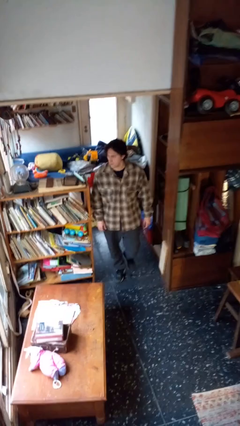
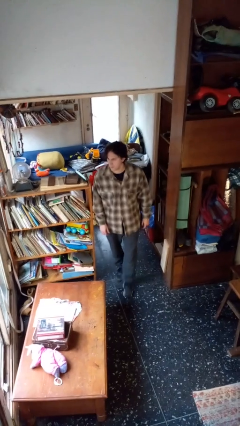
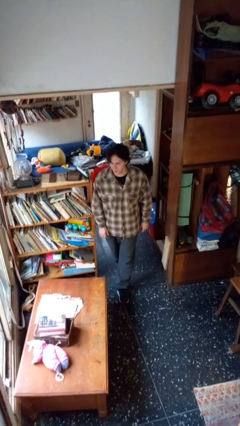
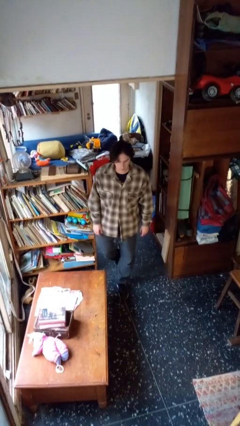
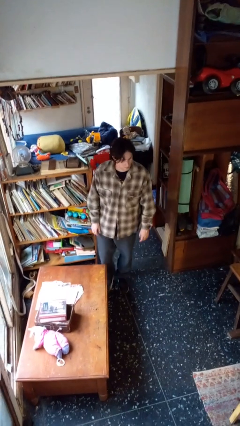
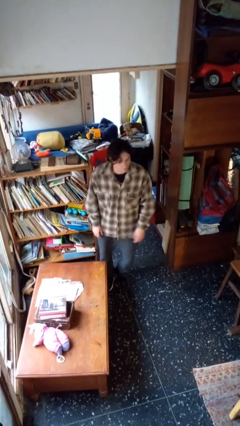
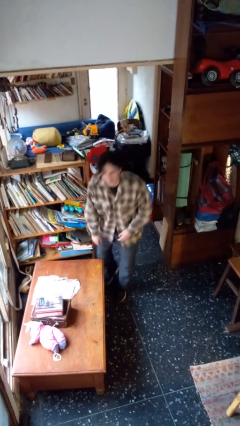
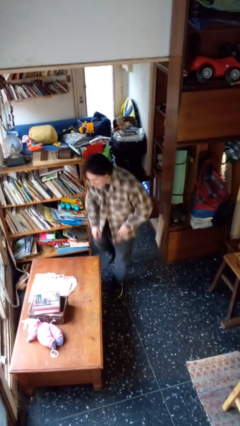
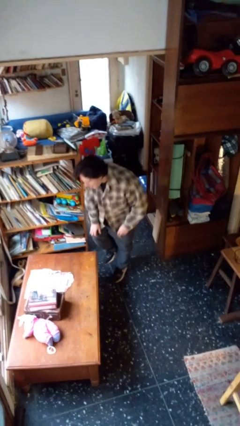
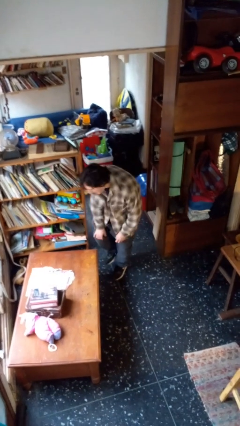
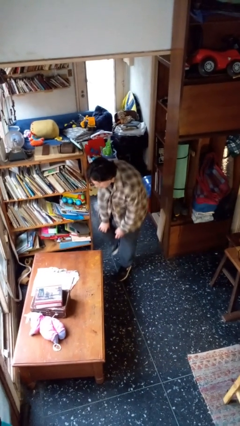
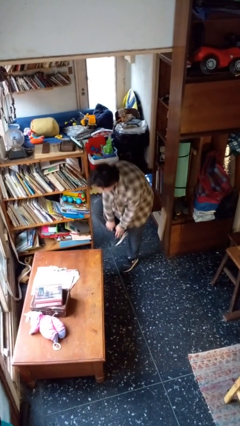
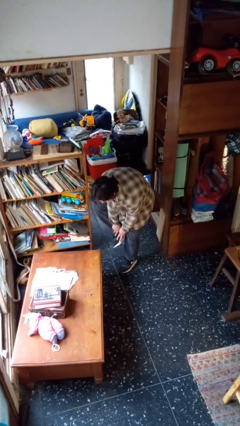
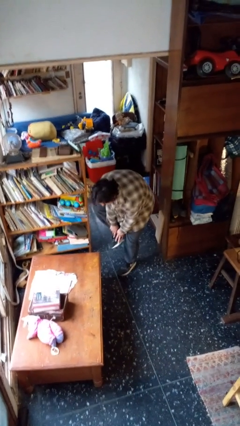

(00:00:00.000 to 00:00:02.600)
person bumps into table

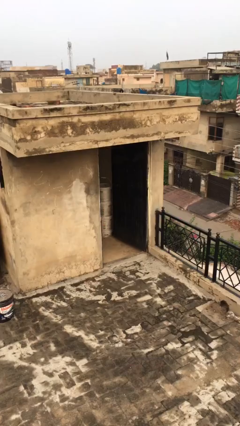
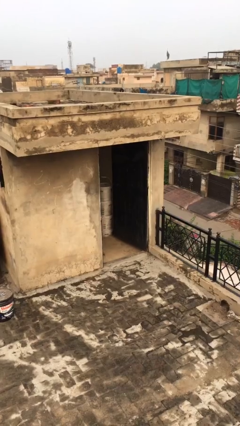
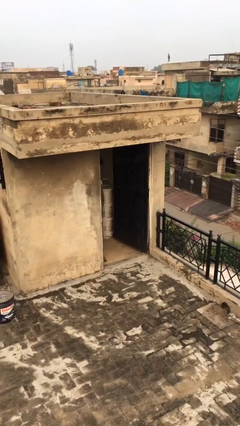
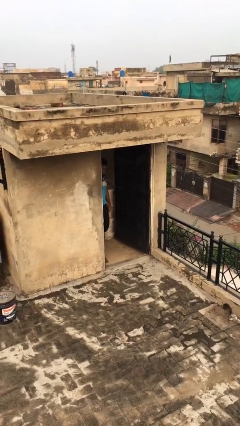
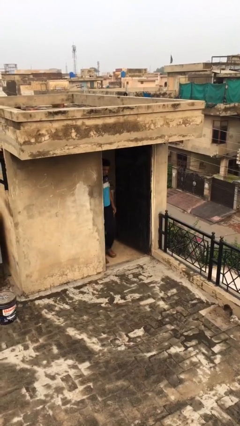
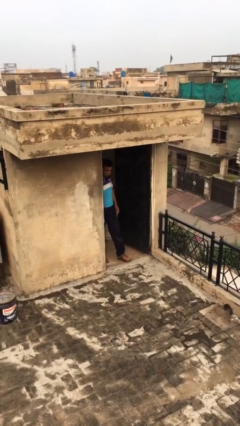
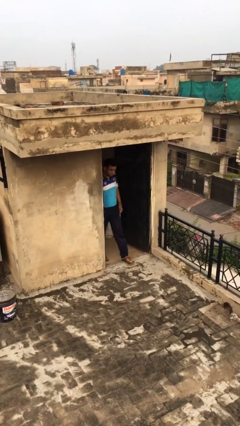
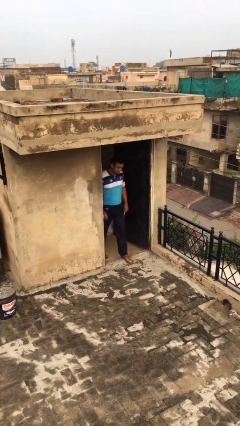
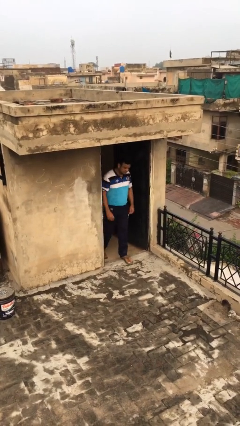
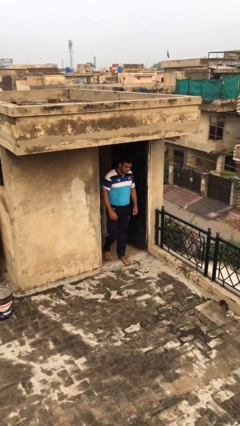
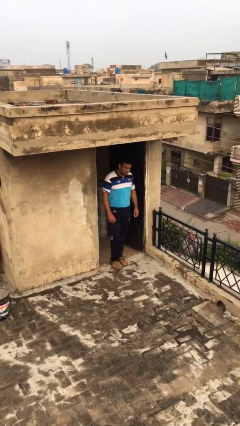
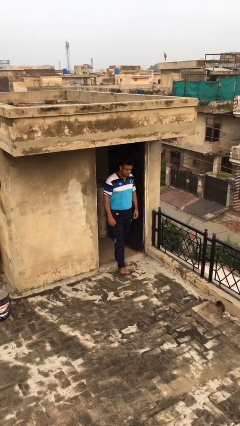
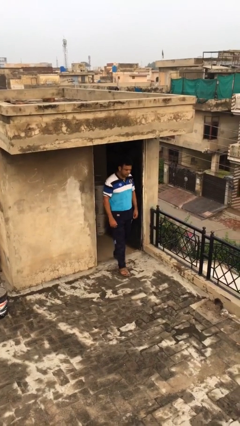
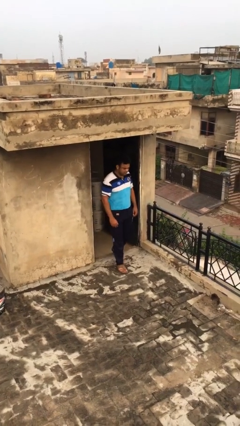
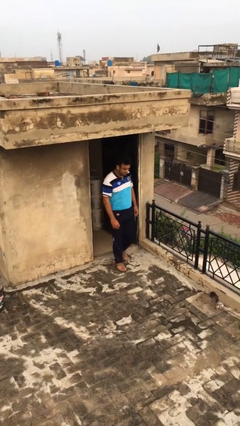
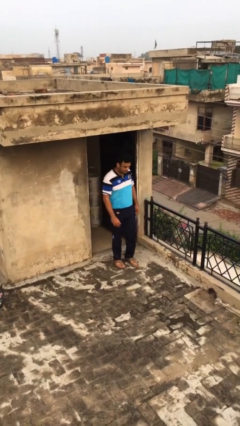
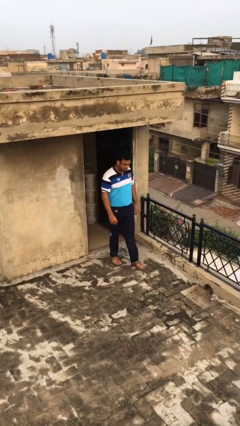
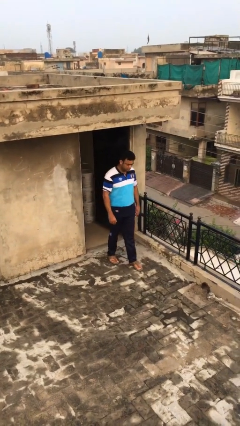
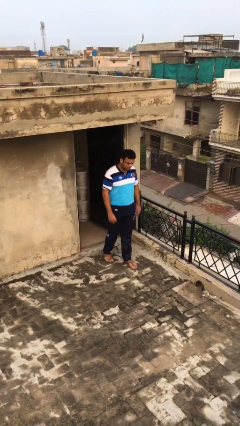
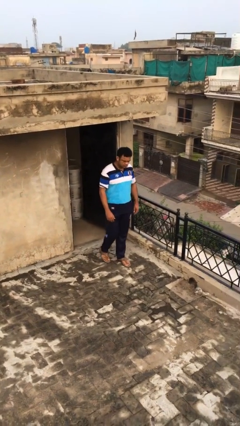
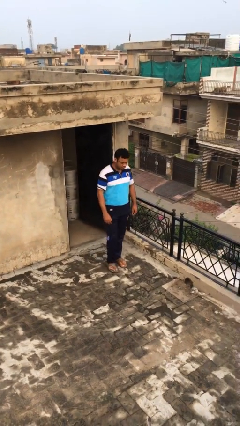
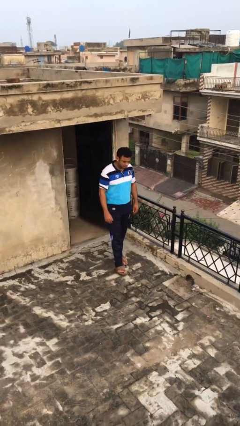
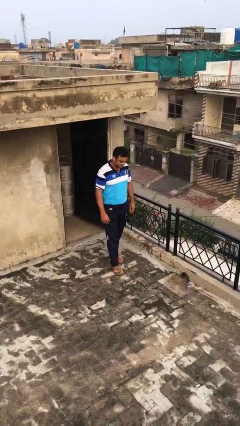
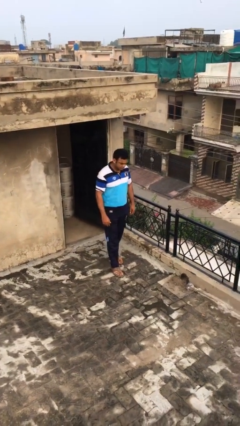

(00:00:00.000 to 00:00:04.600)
person enters scene through structure

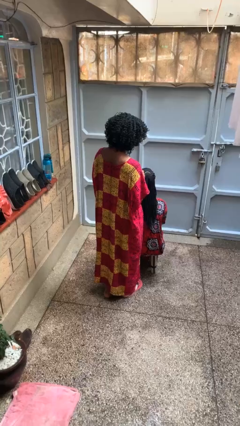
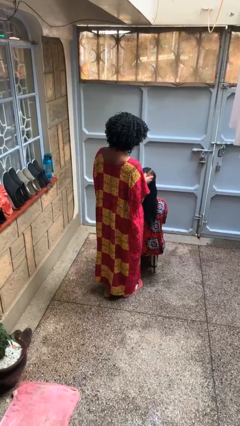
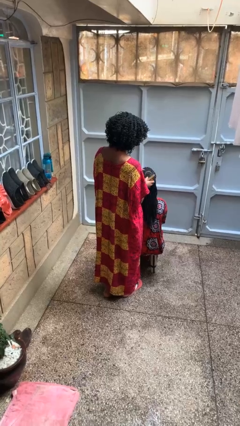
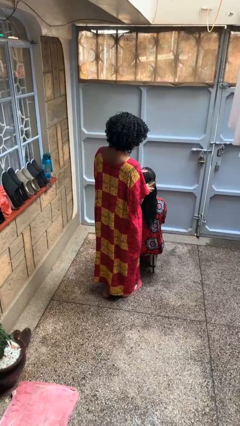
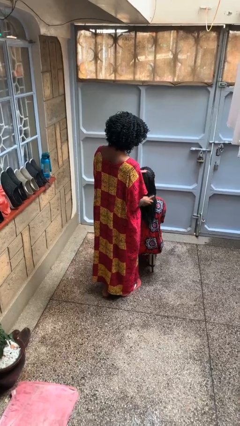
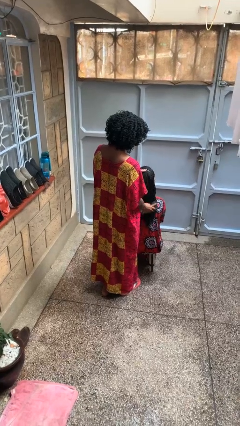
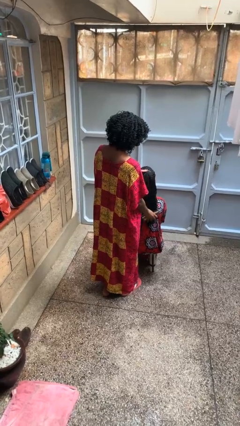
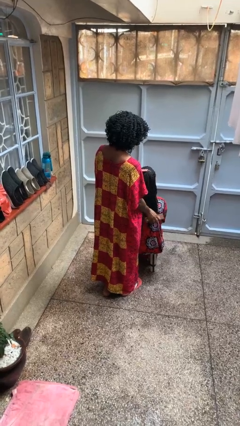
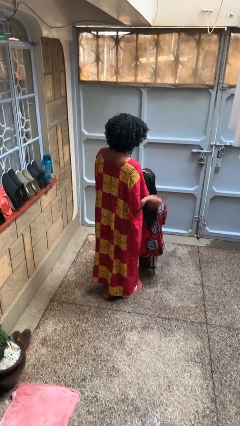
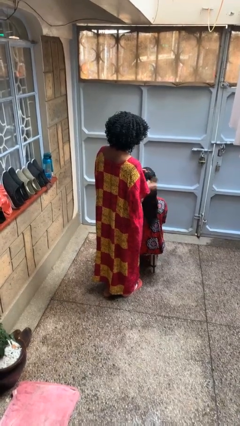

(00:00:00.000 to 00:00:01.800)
person brushes hair of person

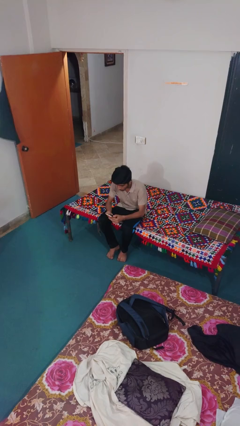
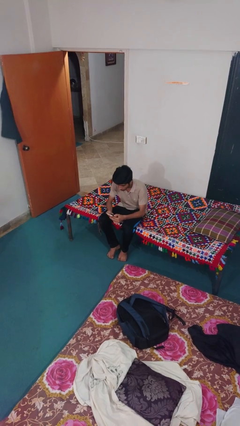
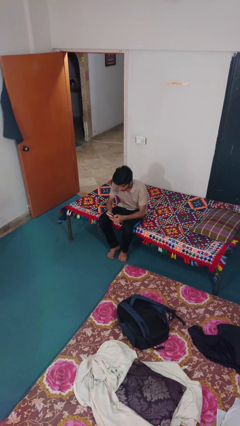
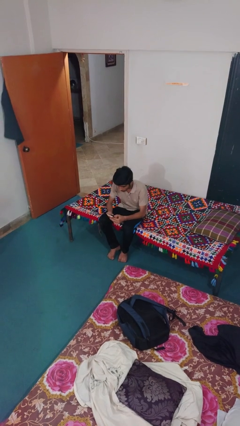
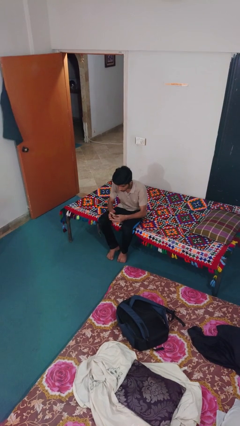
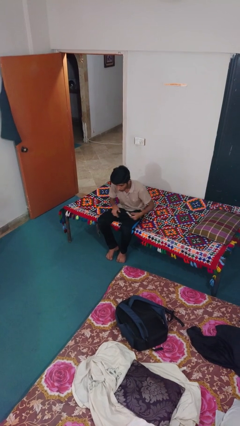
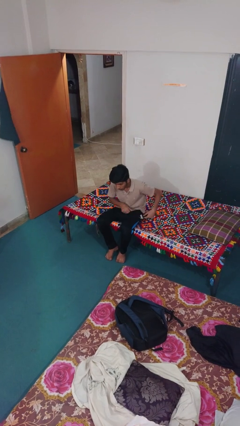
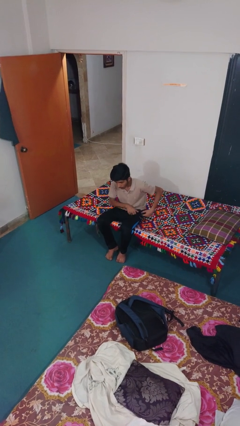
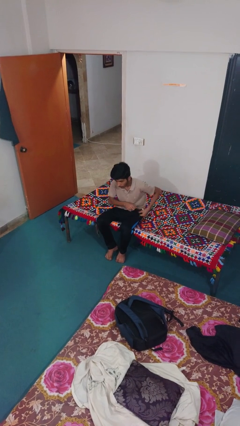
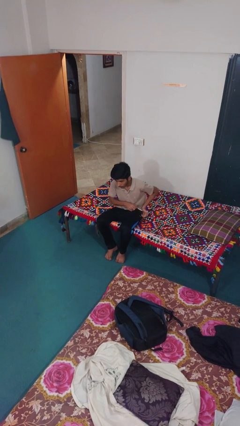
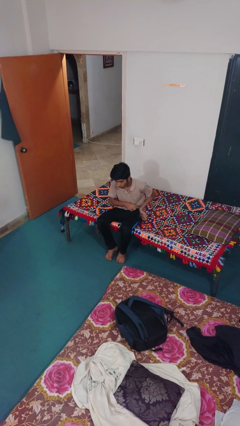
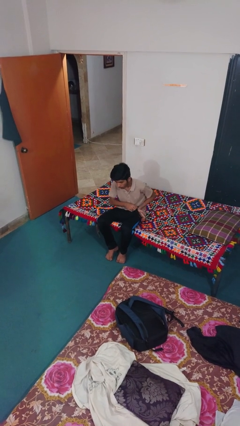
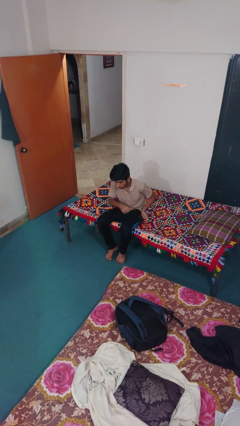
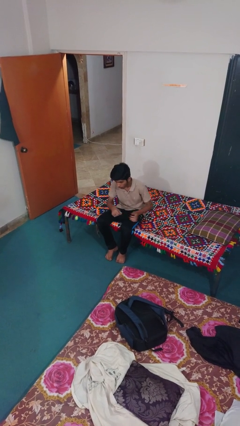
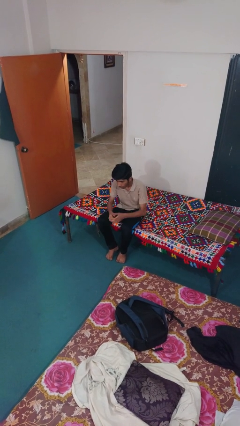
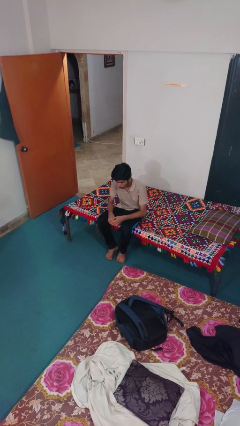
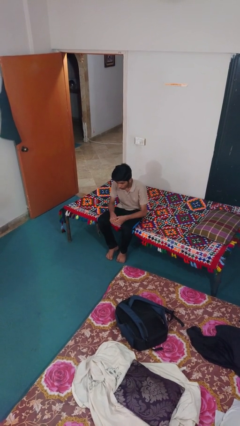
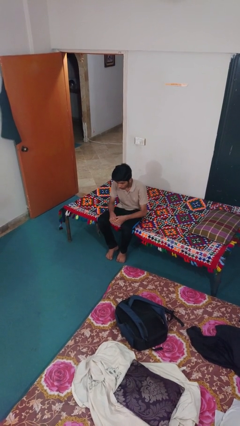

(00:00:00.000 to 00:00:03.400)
person puts phone into pocket

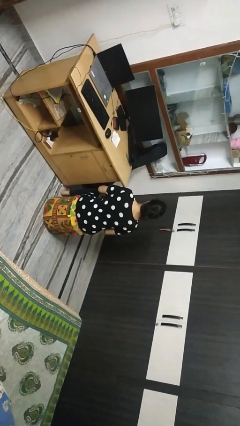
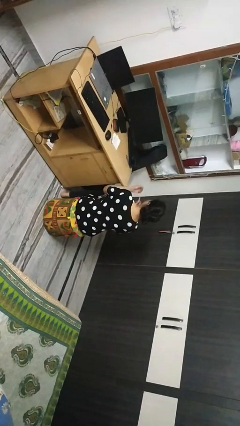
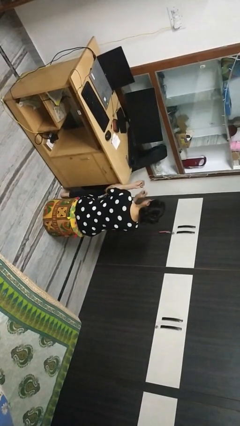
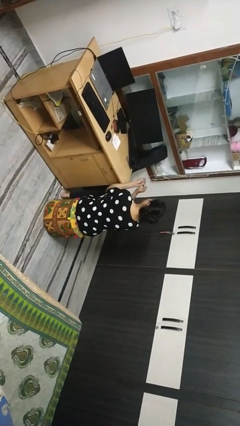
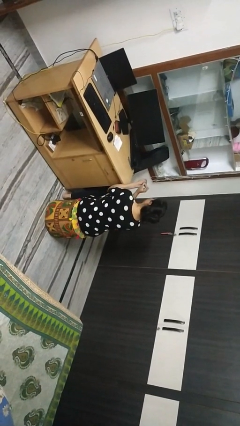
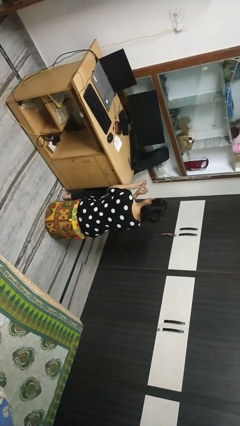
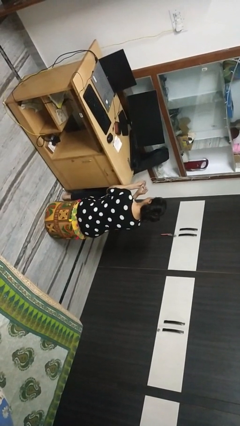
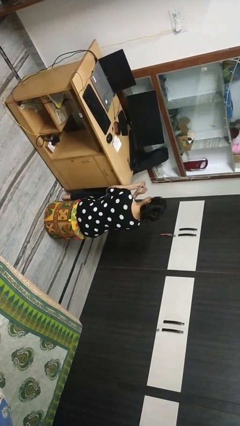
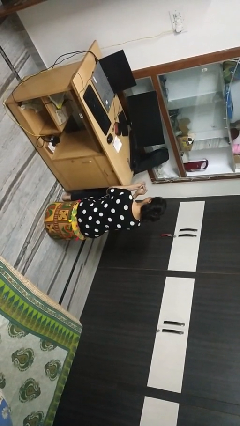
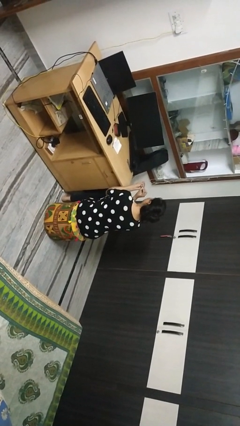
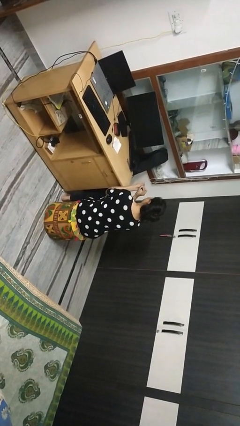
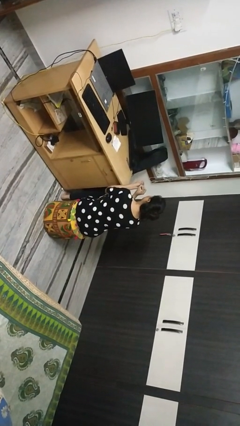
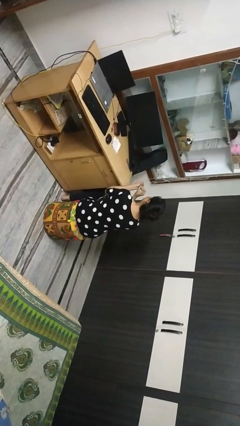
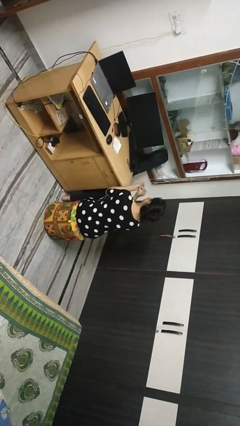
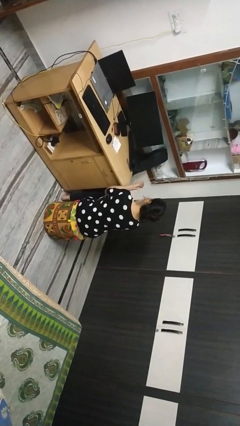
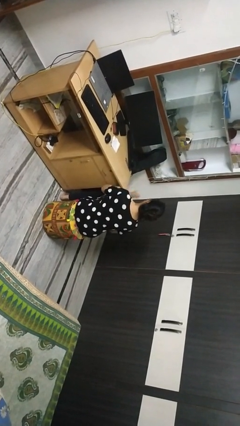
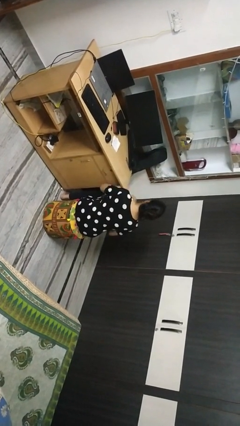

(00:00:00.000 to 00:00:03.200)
person files fingernails

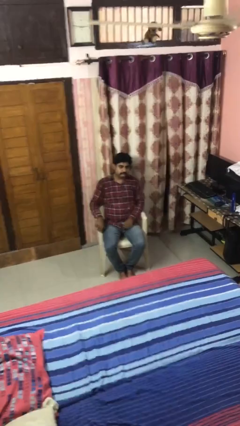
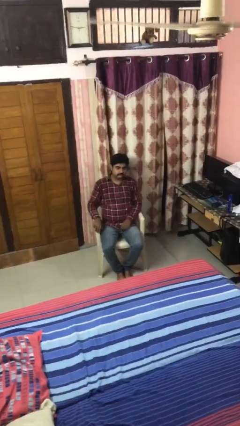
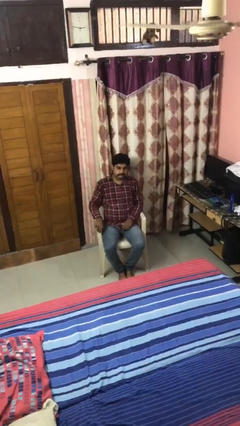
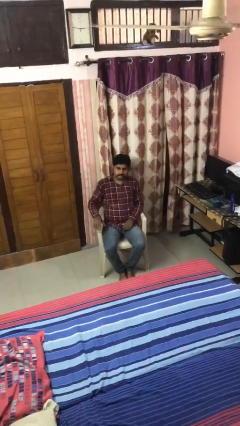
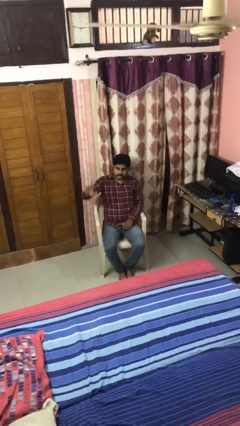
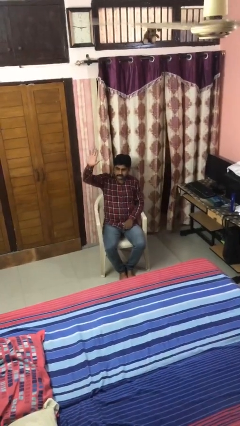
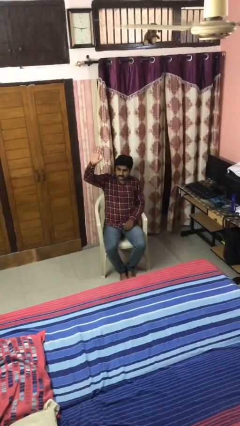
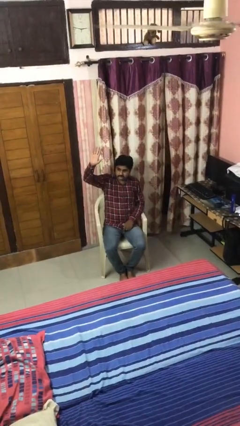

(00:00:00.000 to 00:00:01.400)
person gestures raise hand

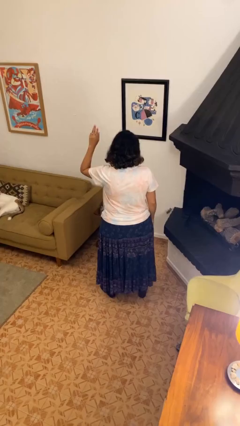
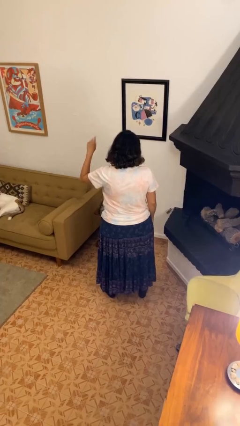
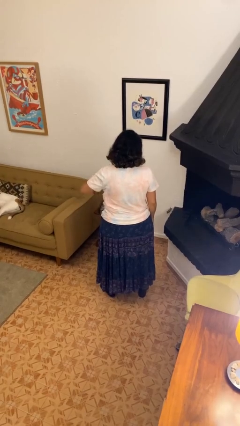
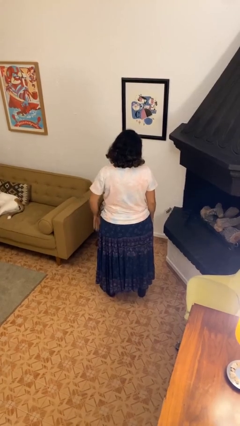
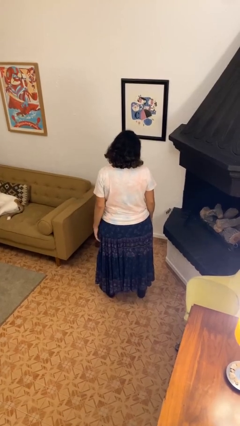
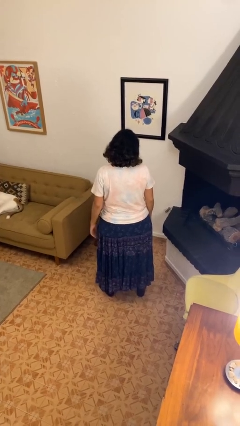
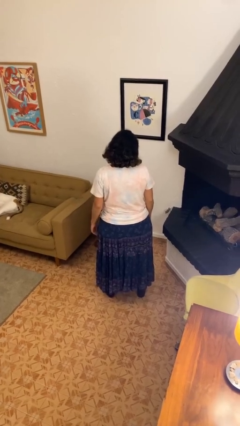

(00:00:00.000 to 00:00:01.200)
person gestures lower hand
